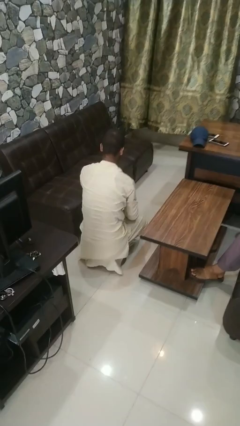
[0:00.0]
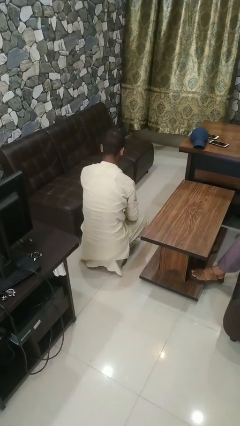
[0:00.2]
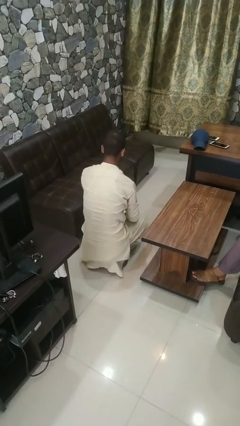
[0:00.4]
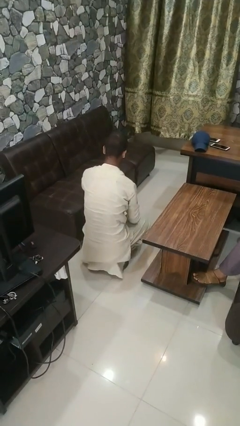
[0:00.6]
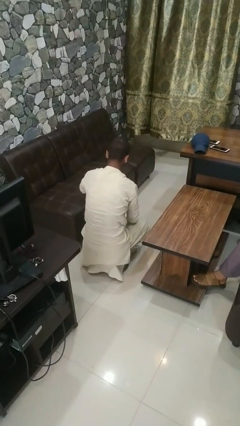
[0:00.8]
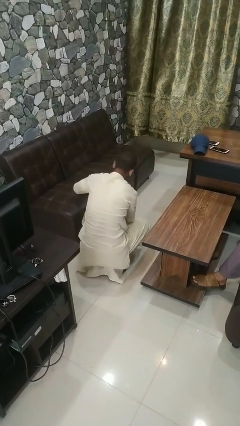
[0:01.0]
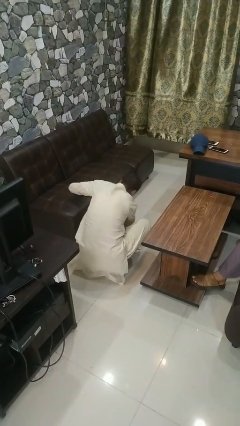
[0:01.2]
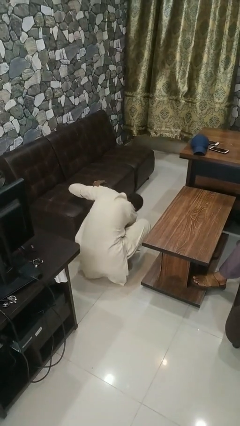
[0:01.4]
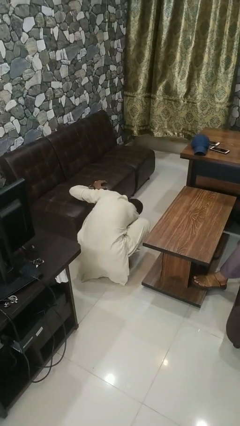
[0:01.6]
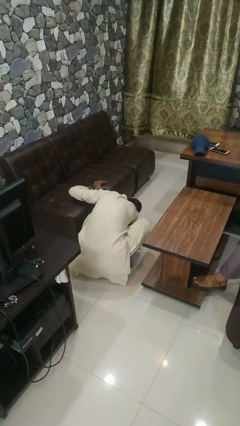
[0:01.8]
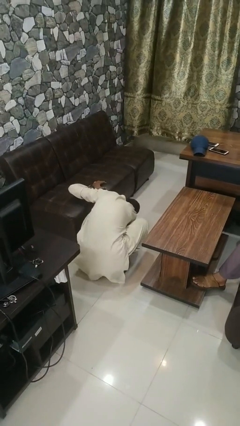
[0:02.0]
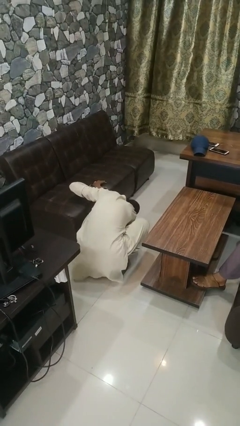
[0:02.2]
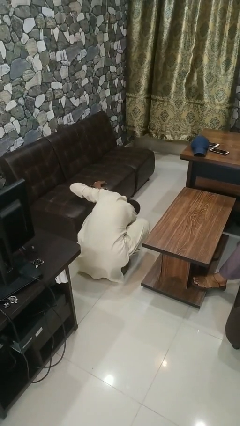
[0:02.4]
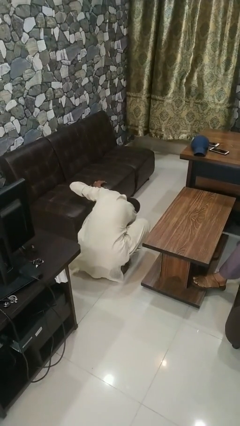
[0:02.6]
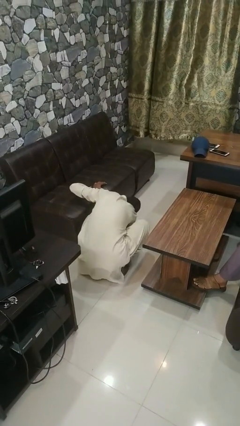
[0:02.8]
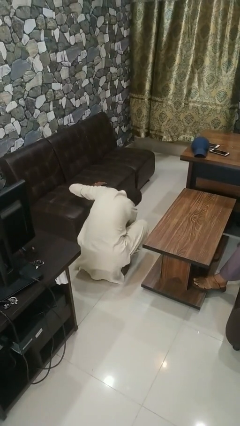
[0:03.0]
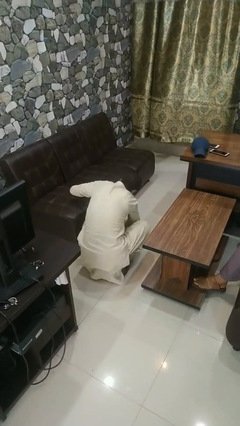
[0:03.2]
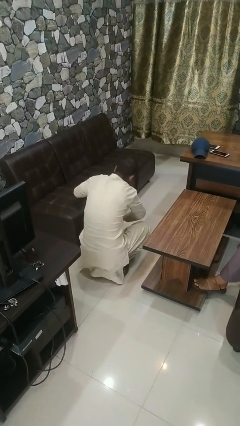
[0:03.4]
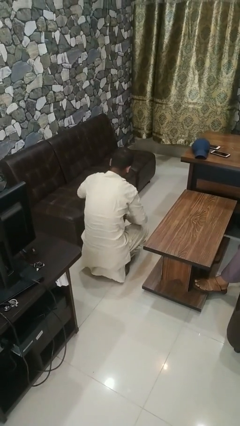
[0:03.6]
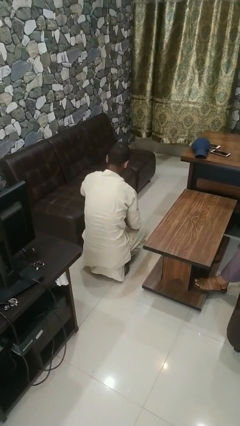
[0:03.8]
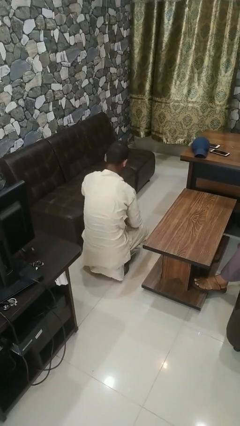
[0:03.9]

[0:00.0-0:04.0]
person searches under couch

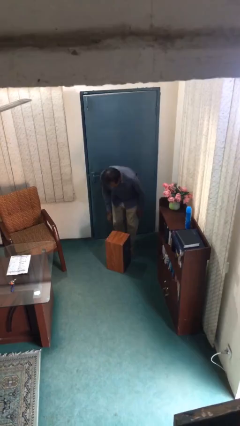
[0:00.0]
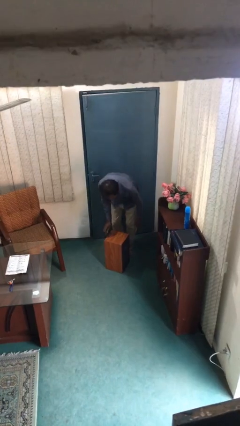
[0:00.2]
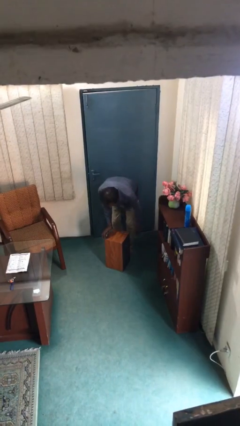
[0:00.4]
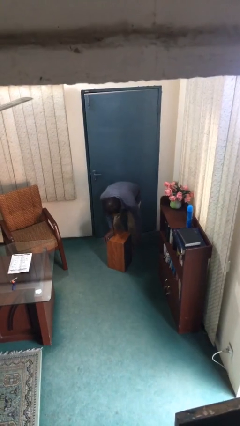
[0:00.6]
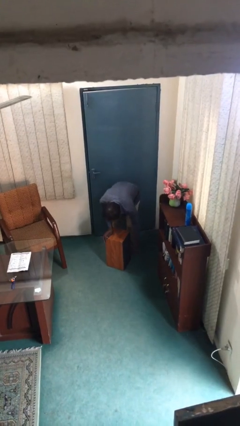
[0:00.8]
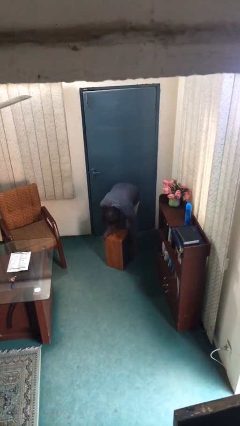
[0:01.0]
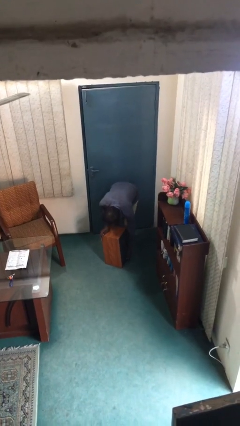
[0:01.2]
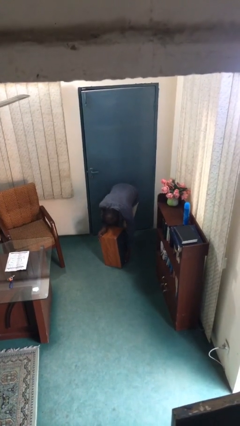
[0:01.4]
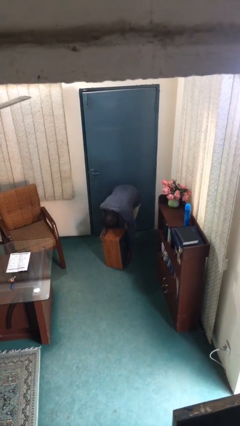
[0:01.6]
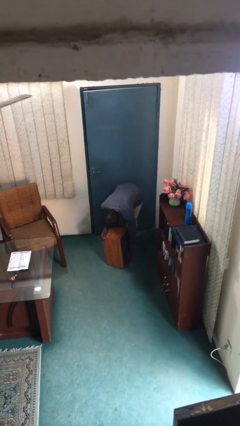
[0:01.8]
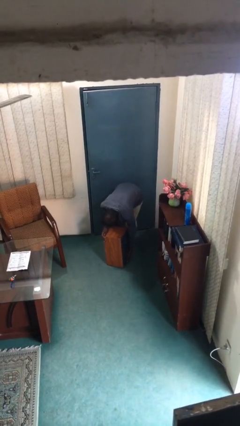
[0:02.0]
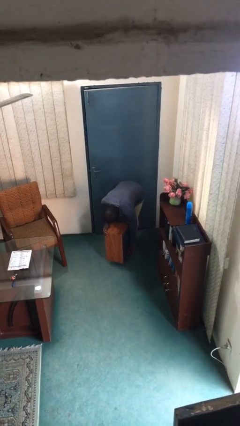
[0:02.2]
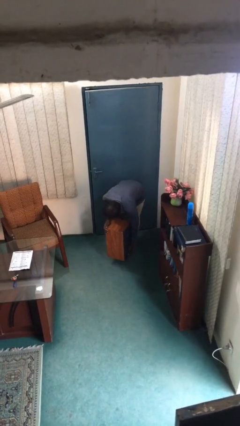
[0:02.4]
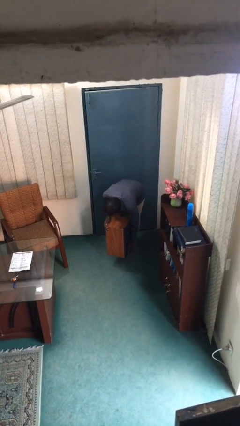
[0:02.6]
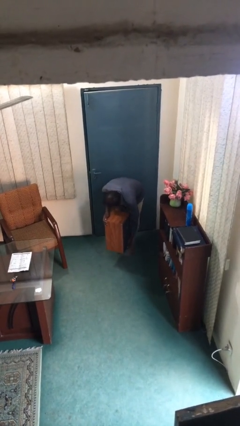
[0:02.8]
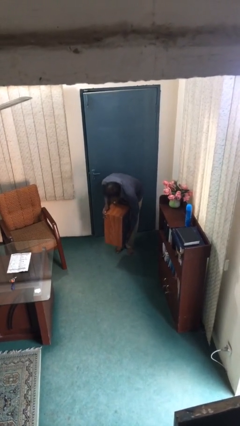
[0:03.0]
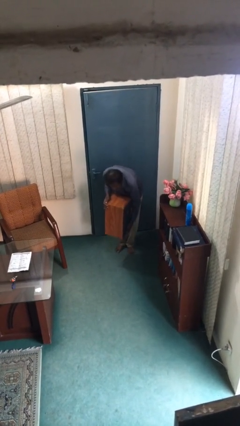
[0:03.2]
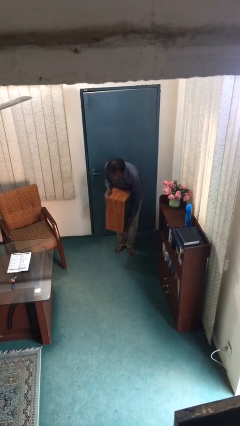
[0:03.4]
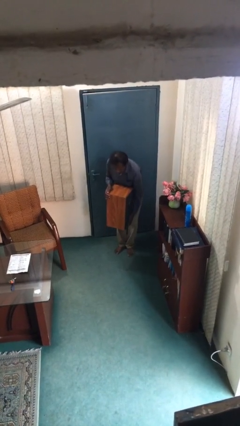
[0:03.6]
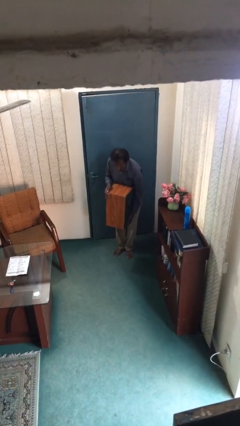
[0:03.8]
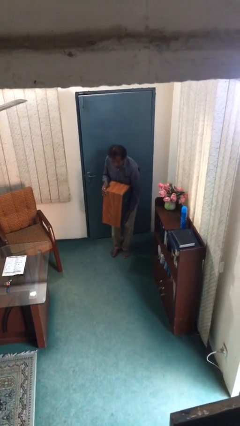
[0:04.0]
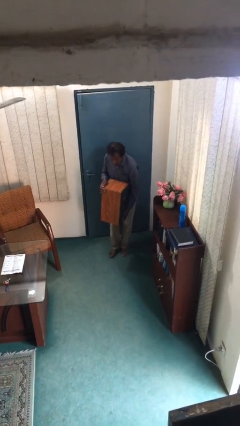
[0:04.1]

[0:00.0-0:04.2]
person picks up object from floor

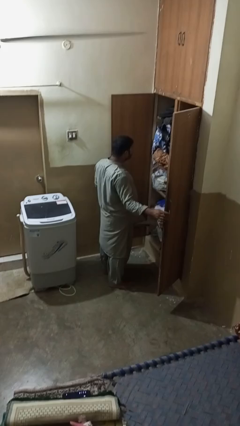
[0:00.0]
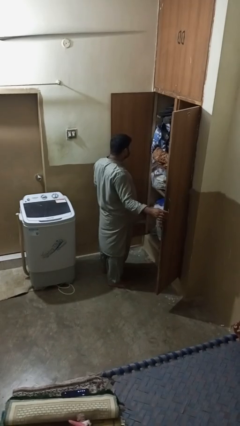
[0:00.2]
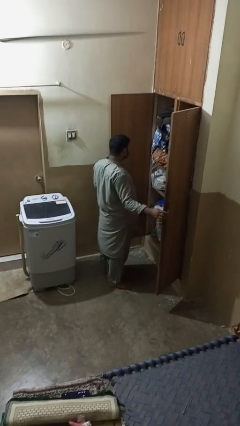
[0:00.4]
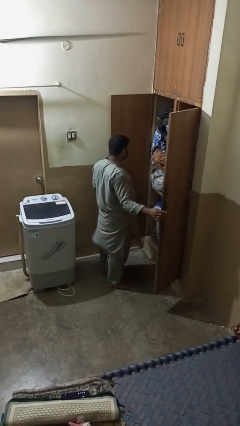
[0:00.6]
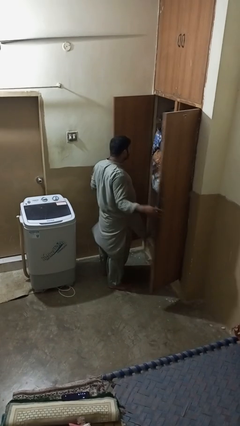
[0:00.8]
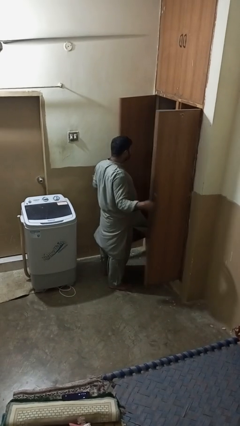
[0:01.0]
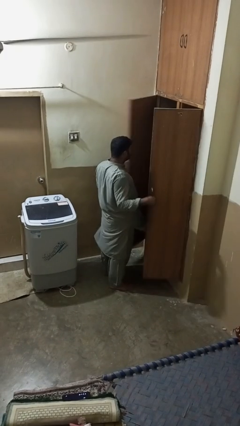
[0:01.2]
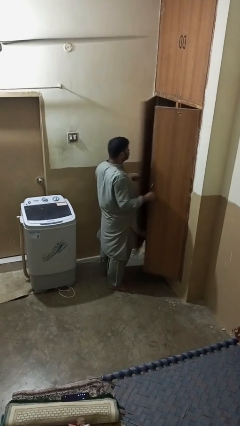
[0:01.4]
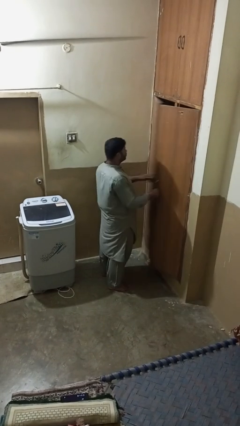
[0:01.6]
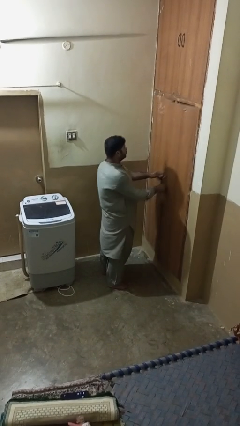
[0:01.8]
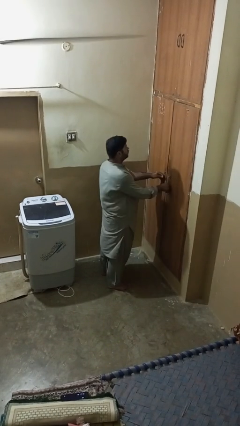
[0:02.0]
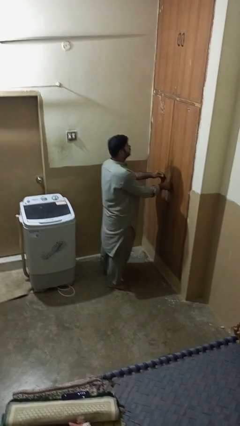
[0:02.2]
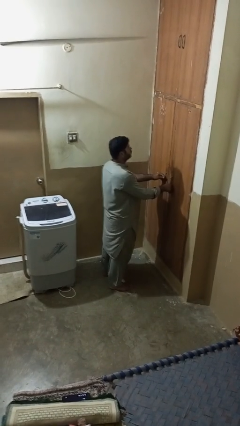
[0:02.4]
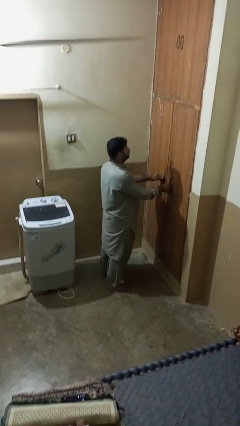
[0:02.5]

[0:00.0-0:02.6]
person closes closet door

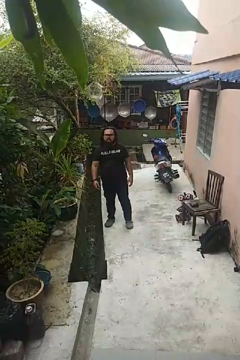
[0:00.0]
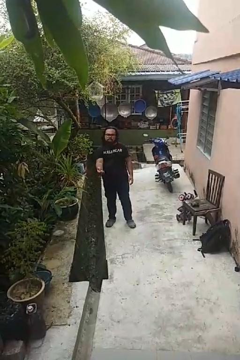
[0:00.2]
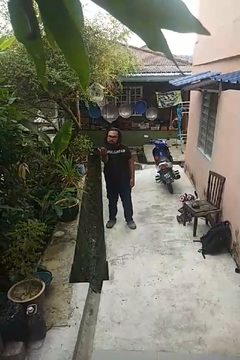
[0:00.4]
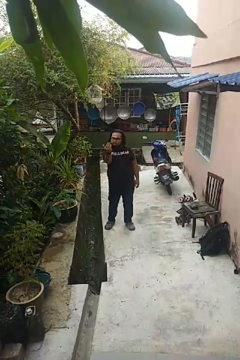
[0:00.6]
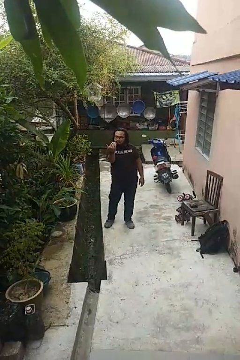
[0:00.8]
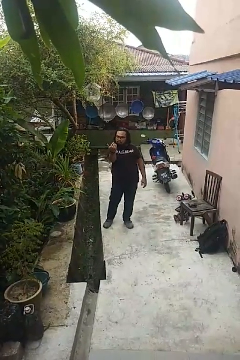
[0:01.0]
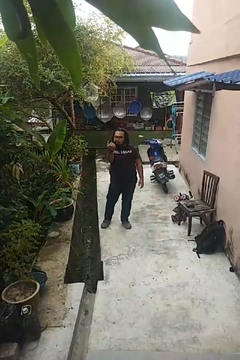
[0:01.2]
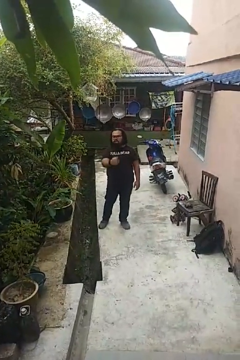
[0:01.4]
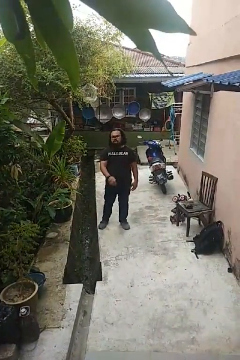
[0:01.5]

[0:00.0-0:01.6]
person gestures come here

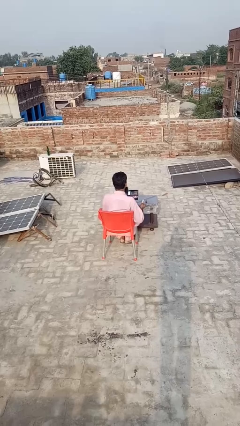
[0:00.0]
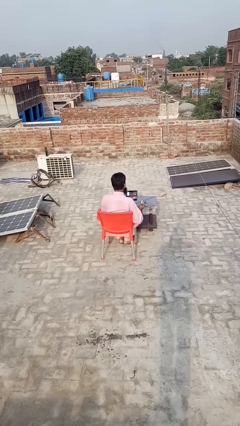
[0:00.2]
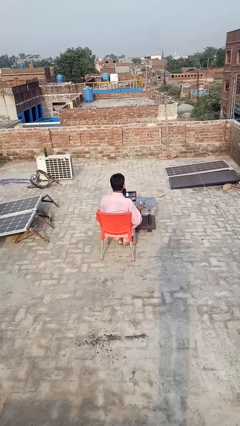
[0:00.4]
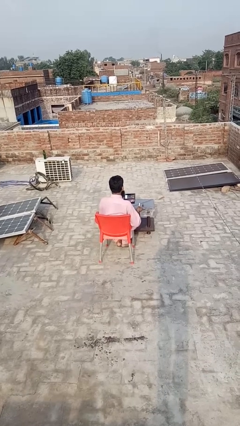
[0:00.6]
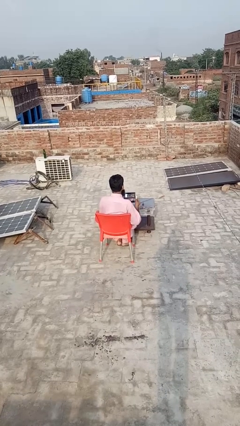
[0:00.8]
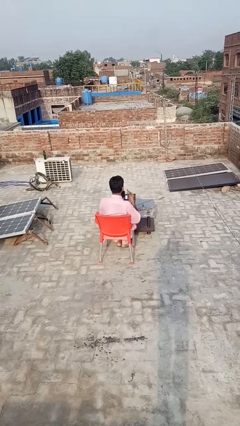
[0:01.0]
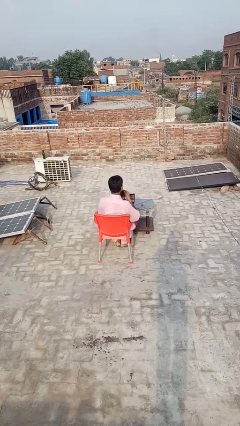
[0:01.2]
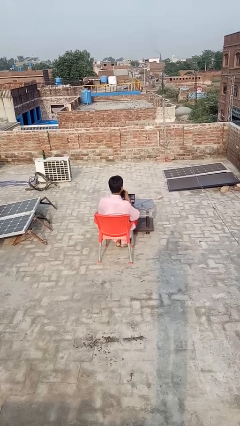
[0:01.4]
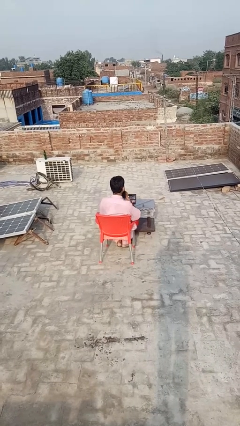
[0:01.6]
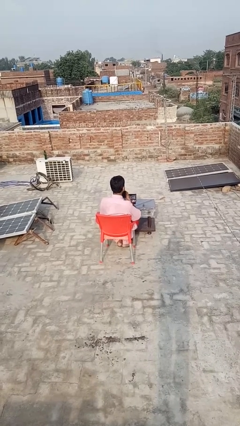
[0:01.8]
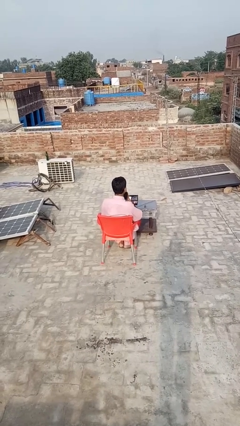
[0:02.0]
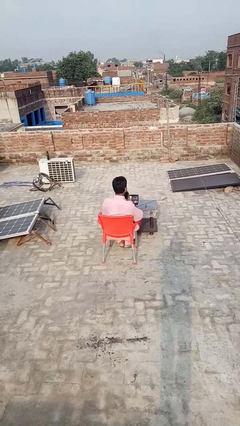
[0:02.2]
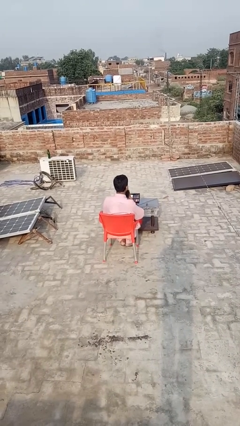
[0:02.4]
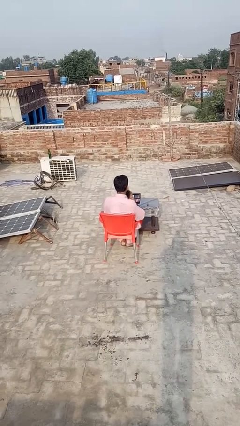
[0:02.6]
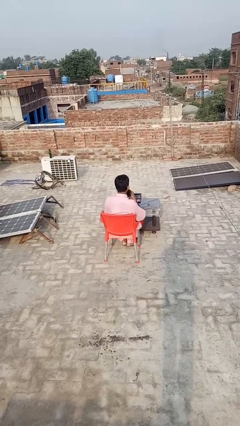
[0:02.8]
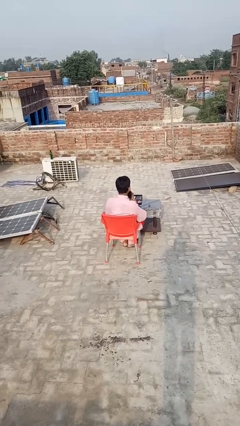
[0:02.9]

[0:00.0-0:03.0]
person applies lip makeup

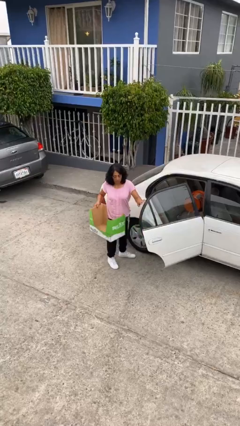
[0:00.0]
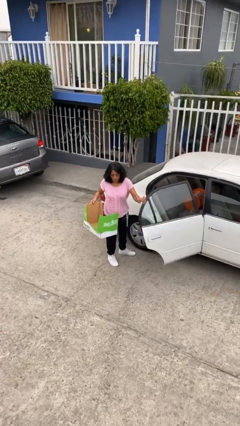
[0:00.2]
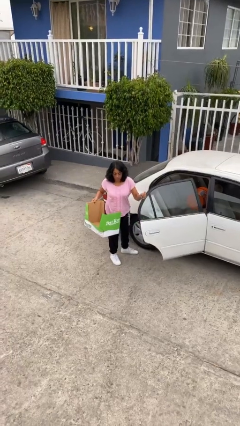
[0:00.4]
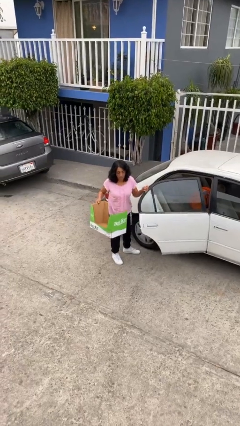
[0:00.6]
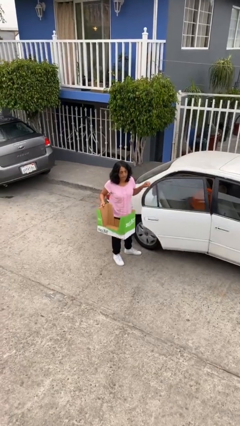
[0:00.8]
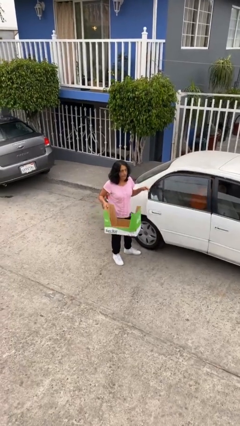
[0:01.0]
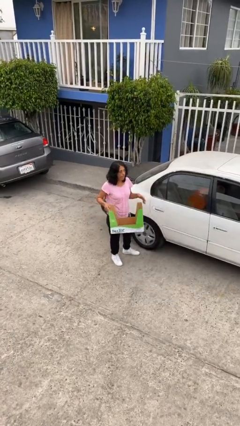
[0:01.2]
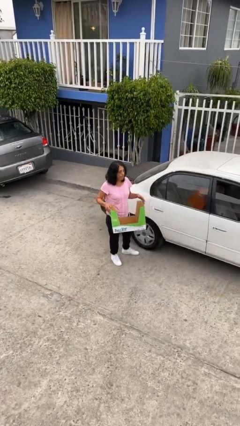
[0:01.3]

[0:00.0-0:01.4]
person closes car door

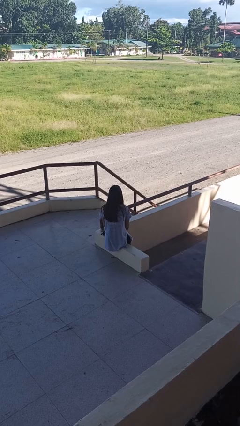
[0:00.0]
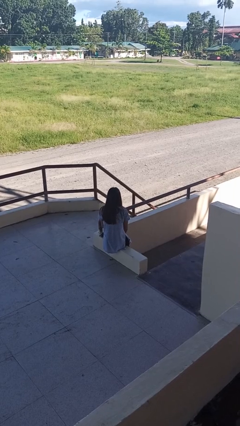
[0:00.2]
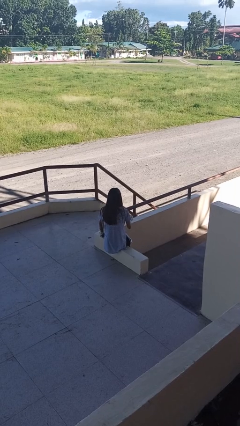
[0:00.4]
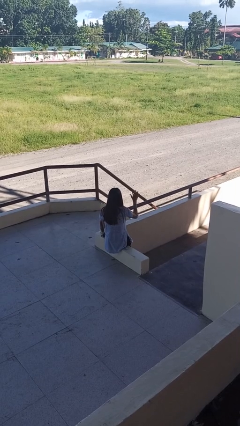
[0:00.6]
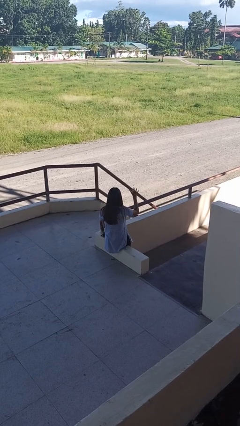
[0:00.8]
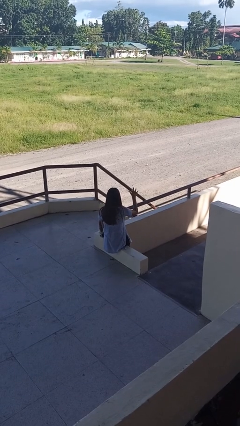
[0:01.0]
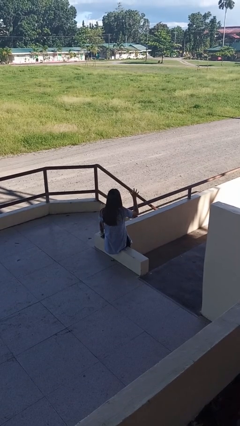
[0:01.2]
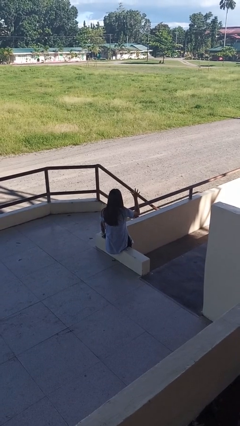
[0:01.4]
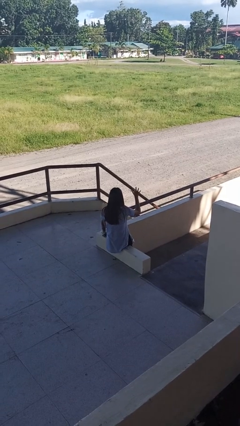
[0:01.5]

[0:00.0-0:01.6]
person gestures number five
